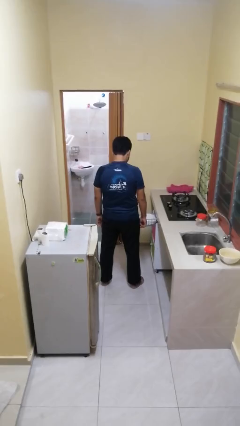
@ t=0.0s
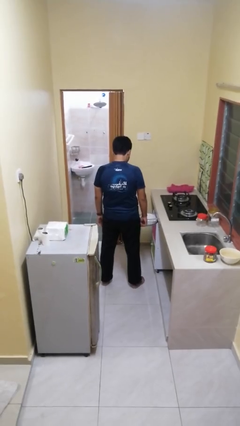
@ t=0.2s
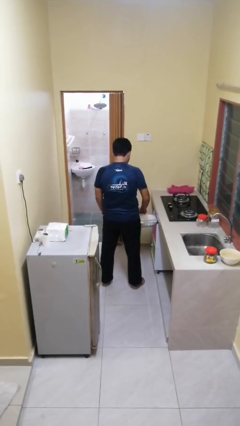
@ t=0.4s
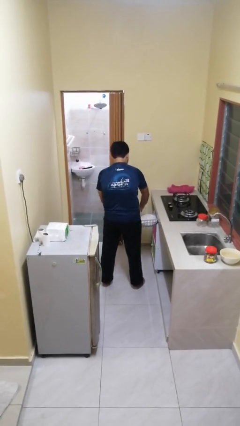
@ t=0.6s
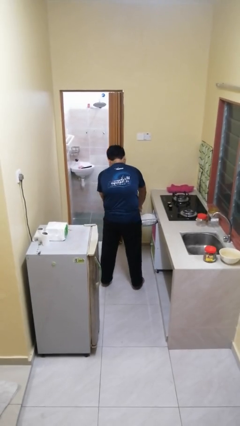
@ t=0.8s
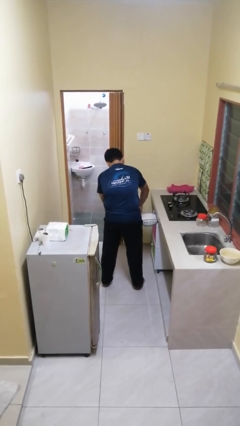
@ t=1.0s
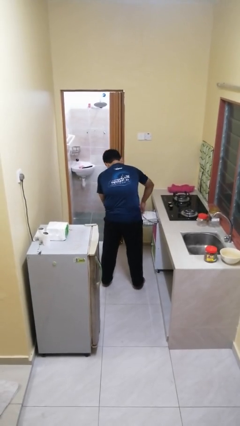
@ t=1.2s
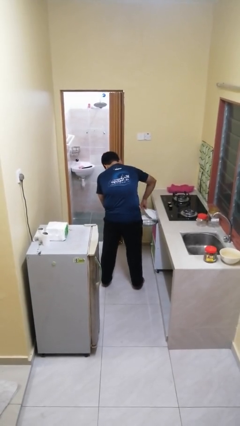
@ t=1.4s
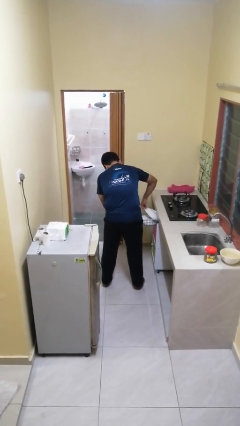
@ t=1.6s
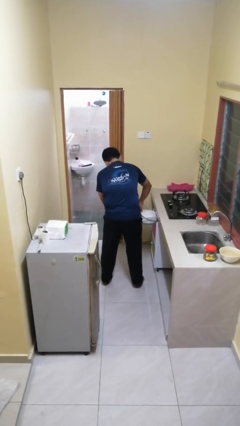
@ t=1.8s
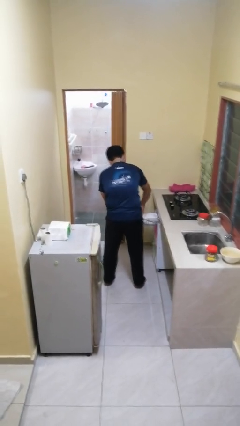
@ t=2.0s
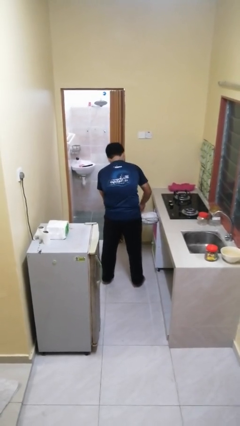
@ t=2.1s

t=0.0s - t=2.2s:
person searches in kitchen drawer

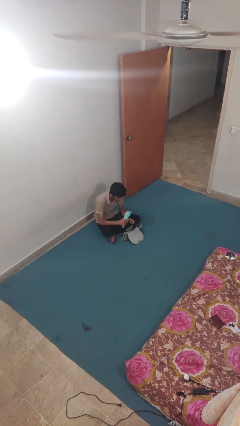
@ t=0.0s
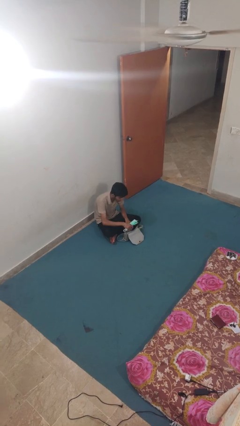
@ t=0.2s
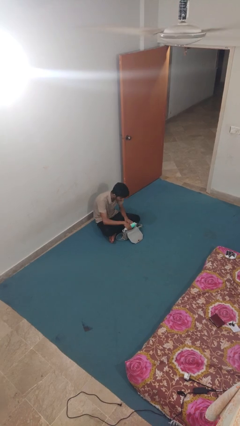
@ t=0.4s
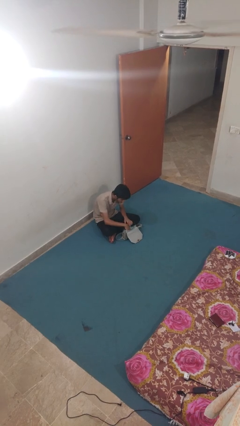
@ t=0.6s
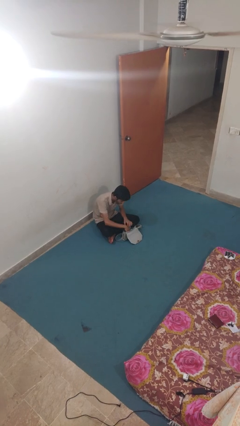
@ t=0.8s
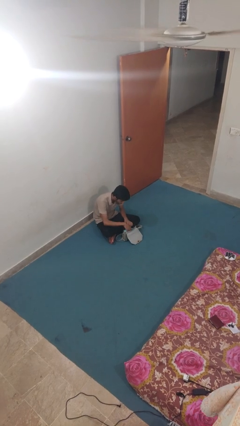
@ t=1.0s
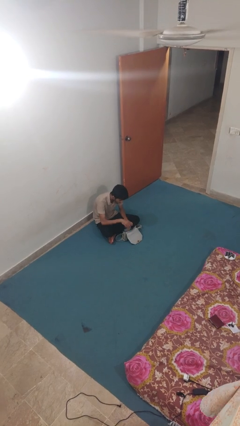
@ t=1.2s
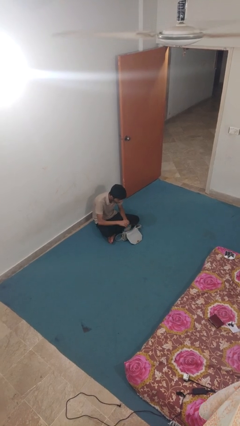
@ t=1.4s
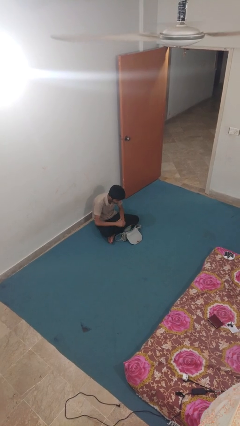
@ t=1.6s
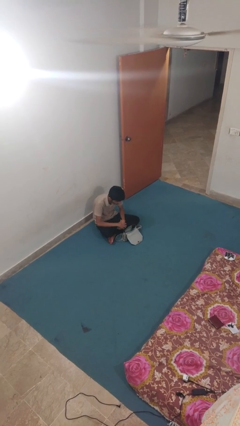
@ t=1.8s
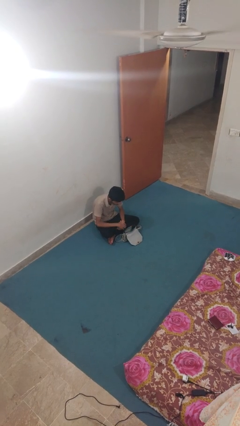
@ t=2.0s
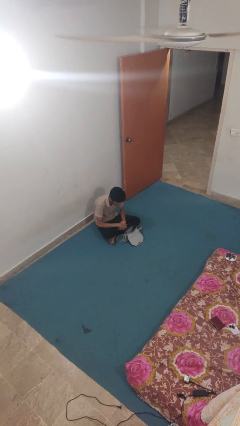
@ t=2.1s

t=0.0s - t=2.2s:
person puts object into purse

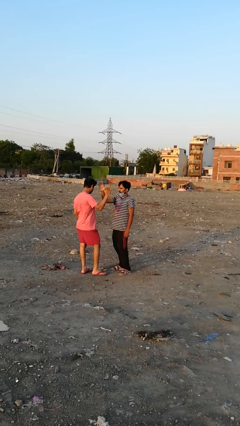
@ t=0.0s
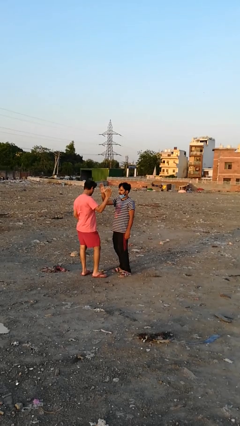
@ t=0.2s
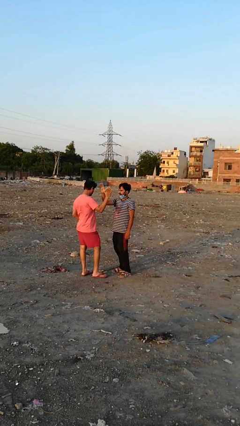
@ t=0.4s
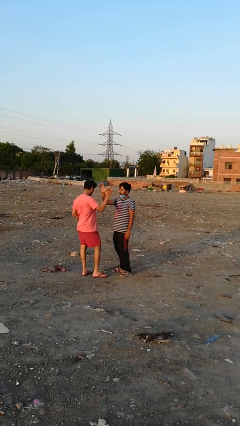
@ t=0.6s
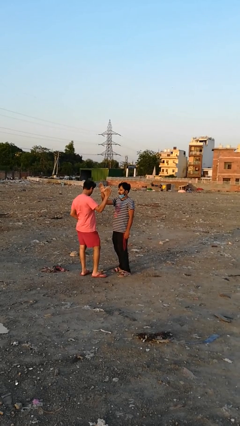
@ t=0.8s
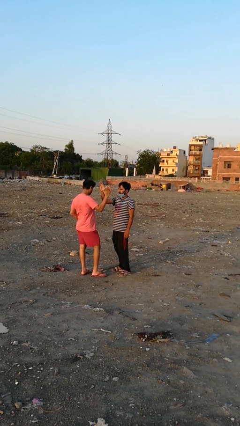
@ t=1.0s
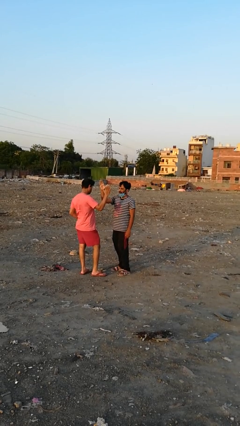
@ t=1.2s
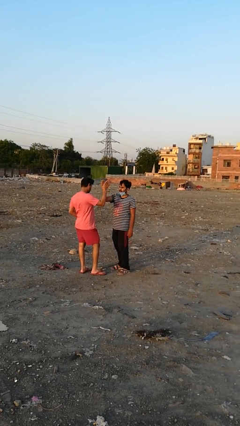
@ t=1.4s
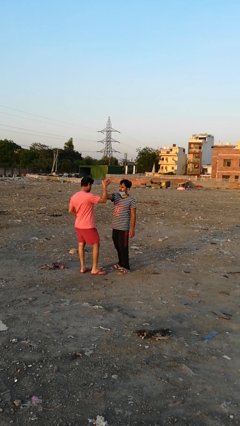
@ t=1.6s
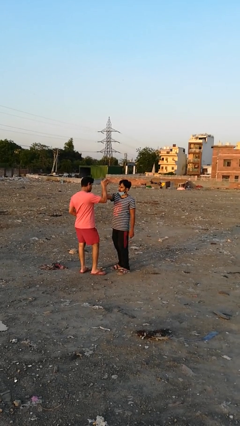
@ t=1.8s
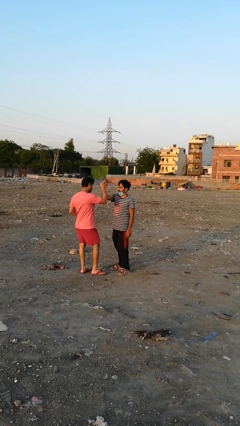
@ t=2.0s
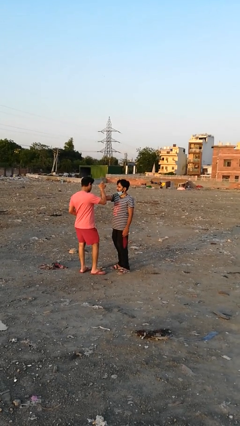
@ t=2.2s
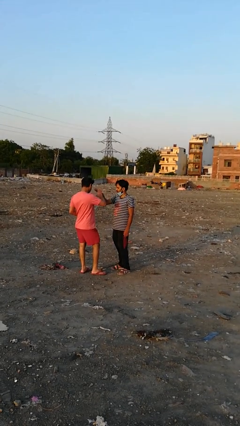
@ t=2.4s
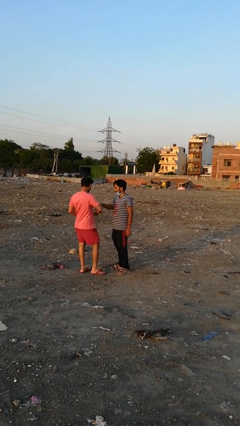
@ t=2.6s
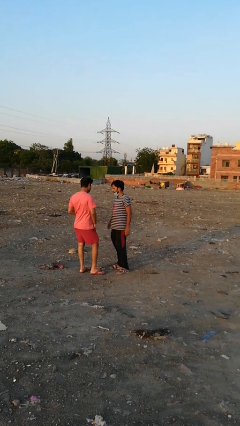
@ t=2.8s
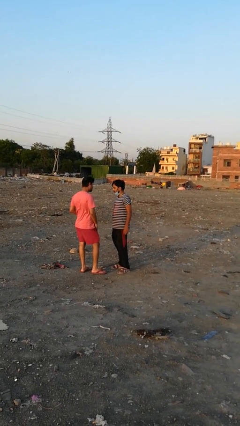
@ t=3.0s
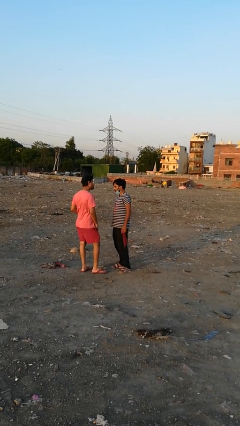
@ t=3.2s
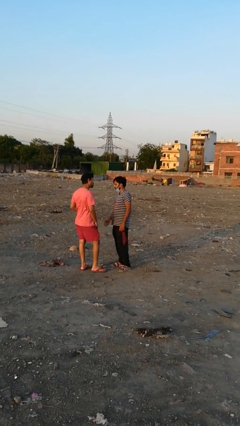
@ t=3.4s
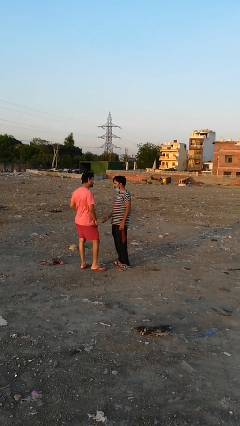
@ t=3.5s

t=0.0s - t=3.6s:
person highfives hand

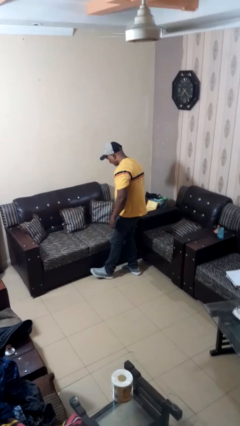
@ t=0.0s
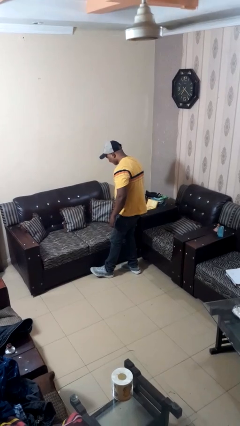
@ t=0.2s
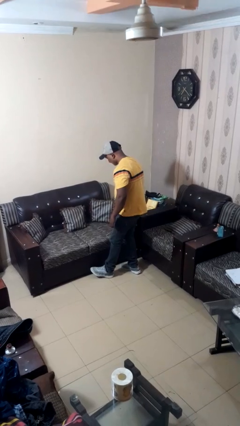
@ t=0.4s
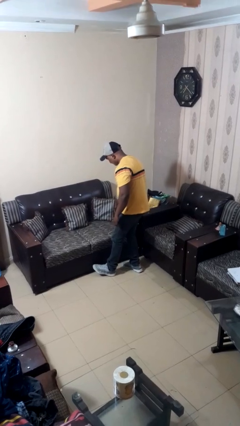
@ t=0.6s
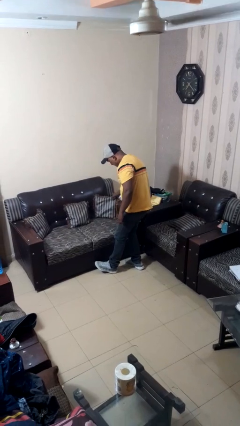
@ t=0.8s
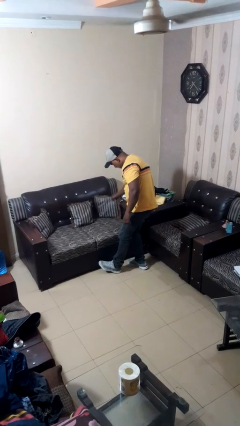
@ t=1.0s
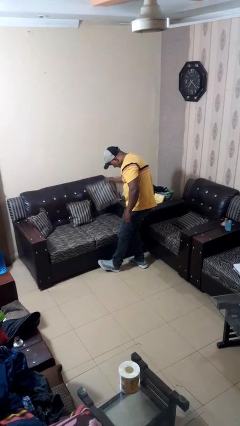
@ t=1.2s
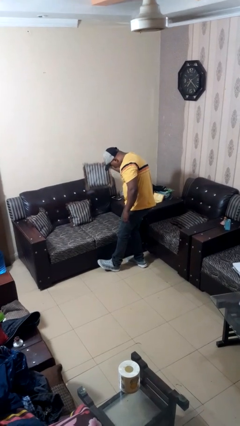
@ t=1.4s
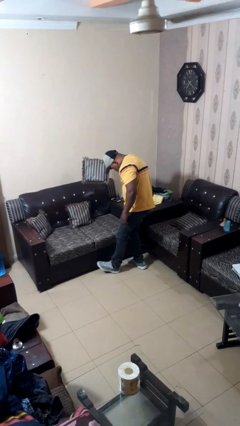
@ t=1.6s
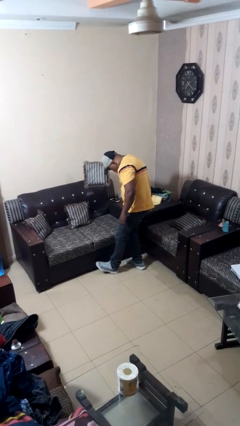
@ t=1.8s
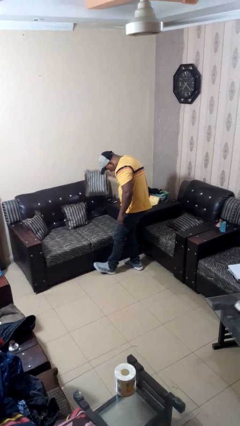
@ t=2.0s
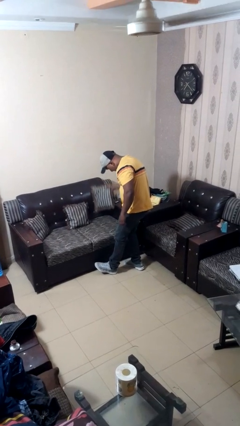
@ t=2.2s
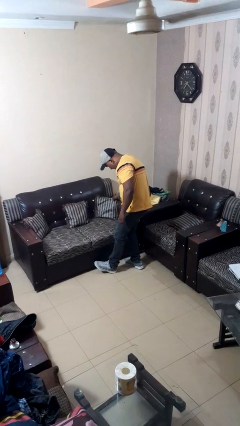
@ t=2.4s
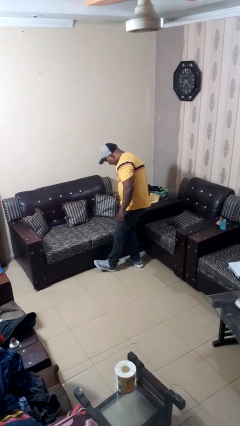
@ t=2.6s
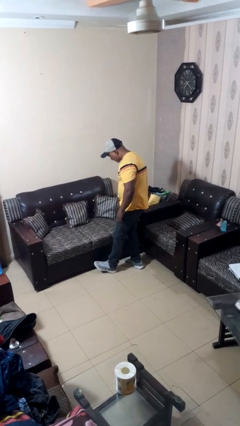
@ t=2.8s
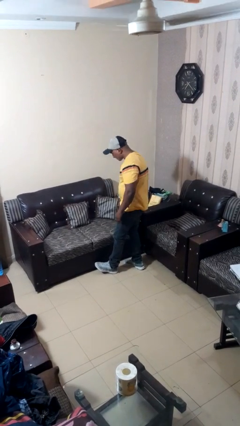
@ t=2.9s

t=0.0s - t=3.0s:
person searches in couch

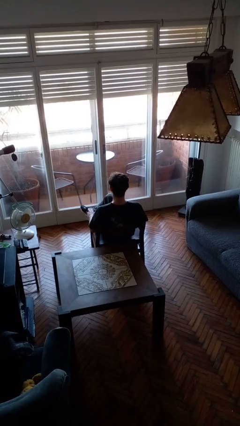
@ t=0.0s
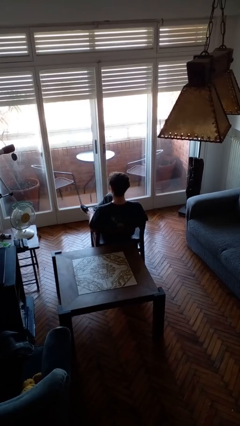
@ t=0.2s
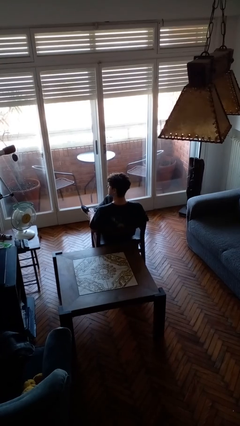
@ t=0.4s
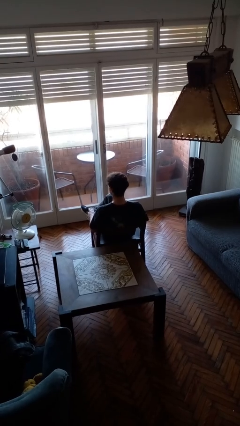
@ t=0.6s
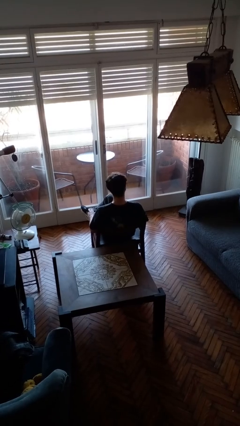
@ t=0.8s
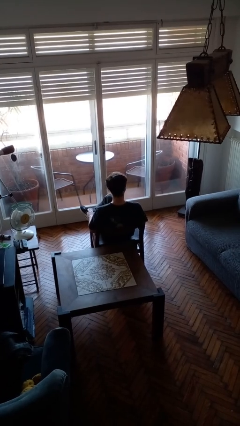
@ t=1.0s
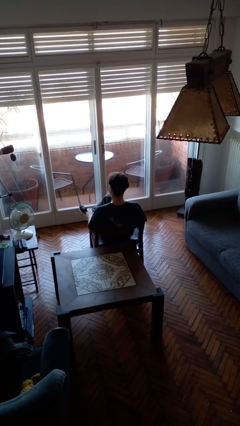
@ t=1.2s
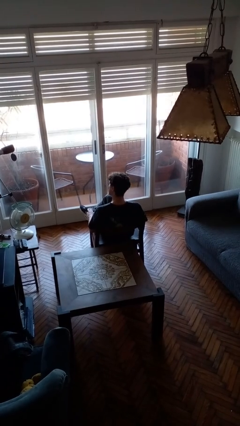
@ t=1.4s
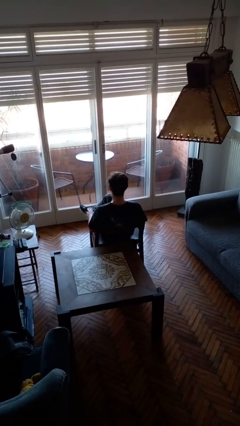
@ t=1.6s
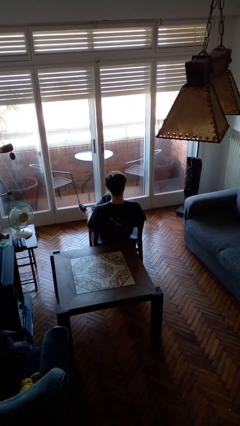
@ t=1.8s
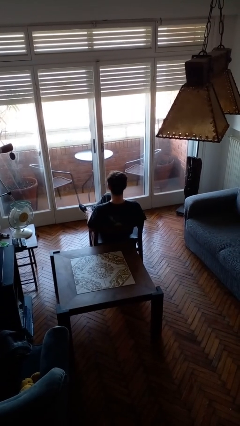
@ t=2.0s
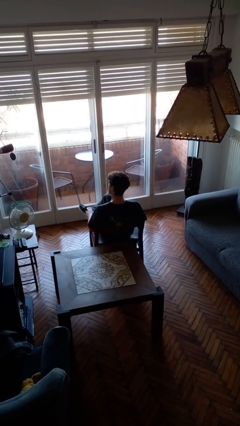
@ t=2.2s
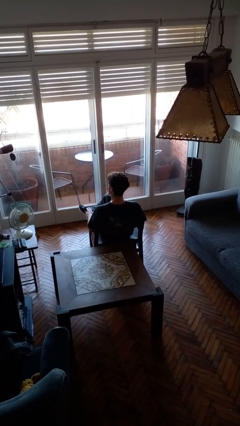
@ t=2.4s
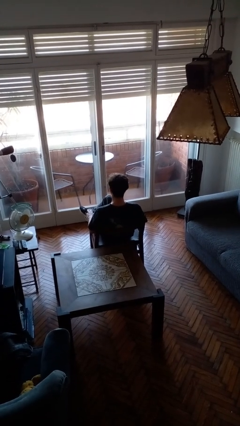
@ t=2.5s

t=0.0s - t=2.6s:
person shakes head

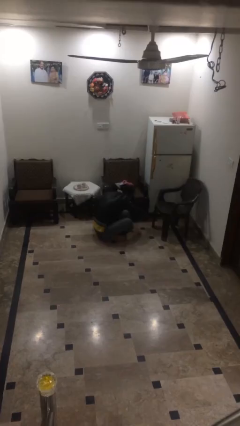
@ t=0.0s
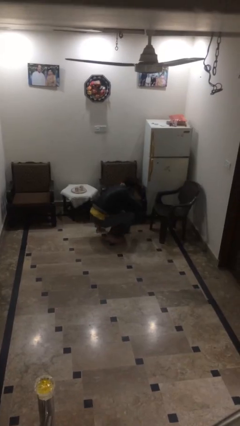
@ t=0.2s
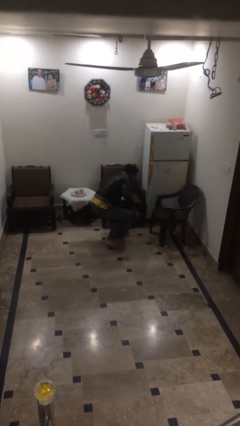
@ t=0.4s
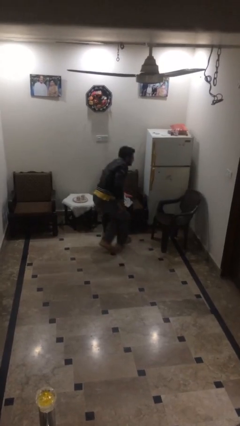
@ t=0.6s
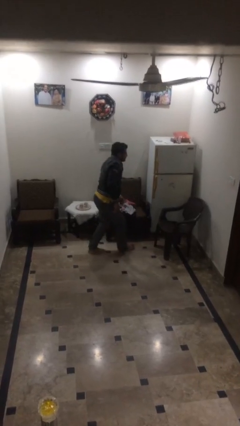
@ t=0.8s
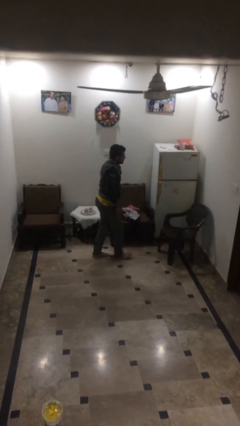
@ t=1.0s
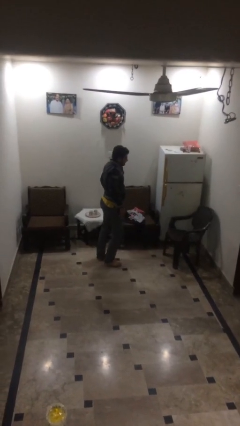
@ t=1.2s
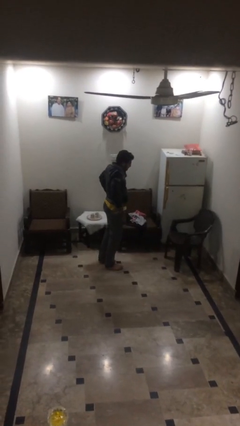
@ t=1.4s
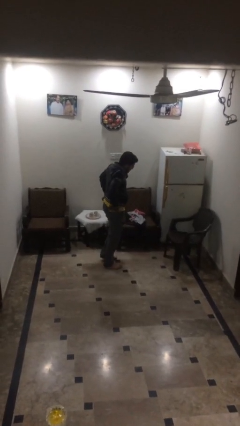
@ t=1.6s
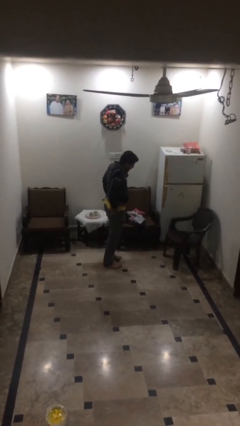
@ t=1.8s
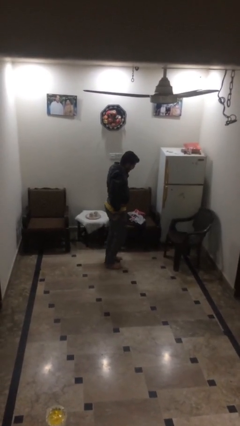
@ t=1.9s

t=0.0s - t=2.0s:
person stands up

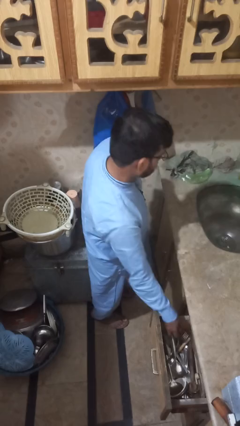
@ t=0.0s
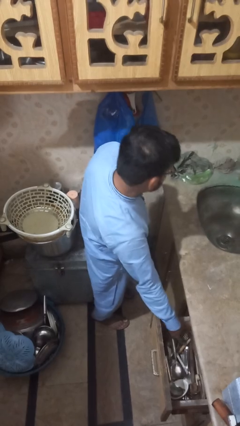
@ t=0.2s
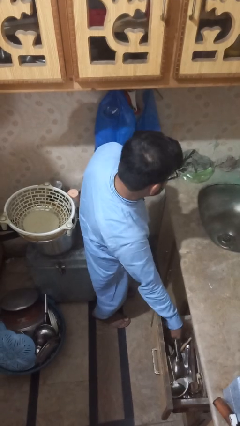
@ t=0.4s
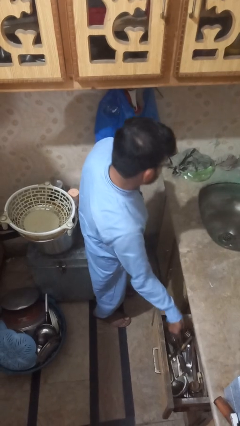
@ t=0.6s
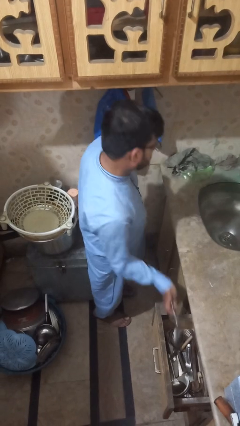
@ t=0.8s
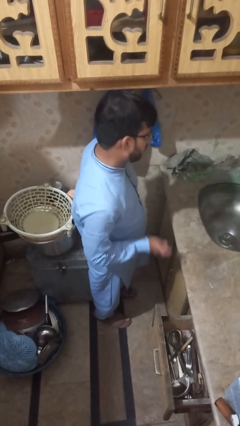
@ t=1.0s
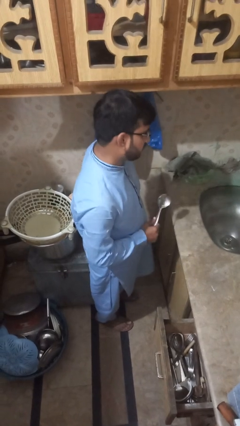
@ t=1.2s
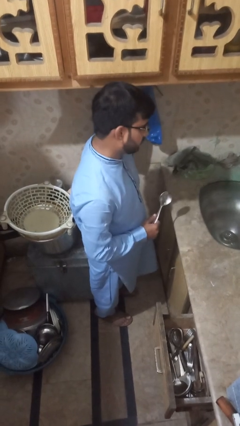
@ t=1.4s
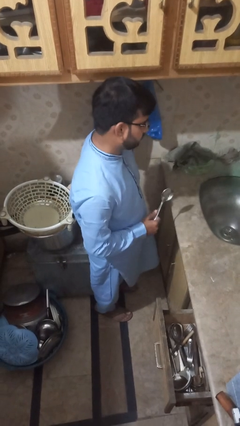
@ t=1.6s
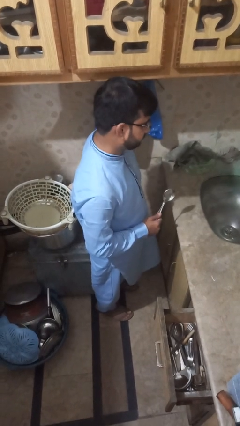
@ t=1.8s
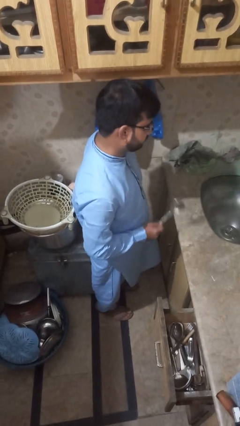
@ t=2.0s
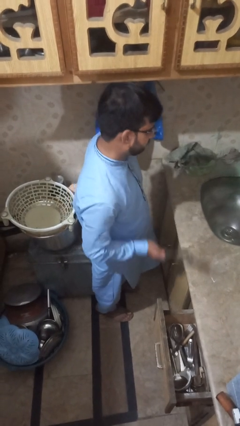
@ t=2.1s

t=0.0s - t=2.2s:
person takes object from kitchen drawer
